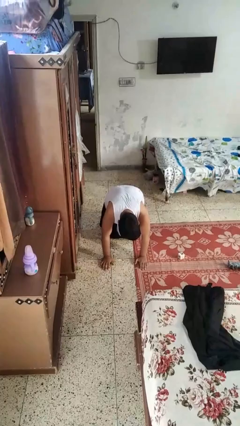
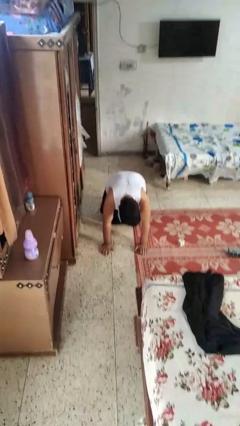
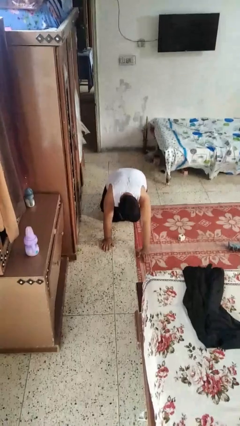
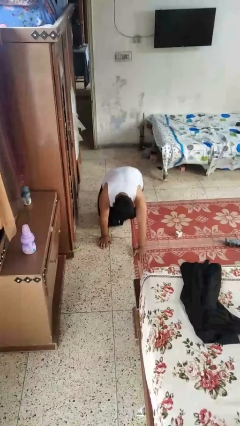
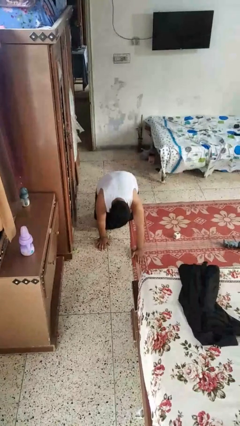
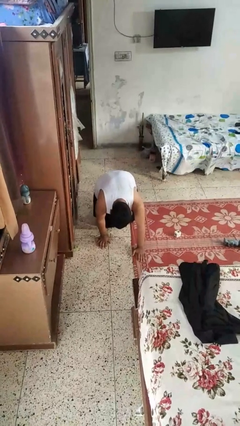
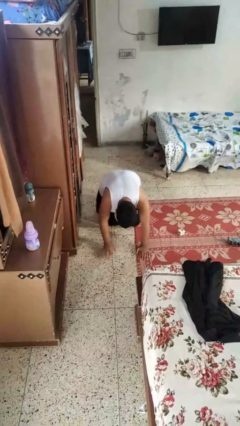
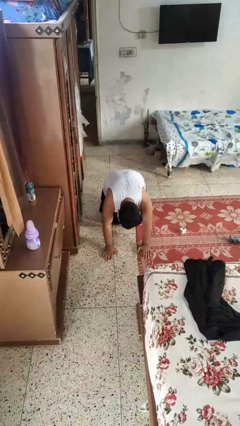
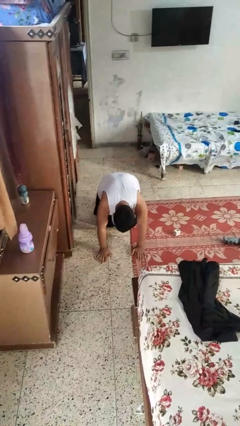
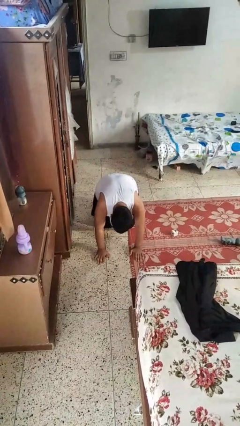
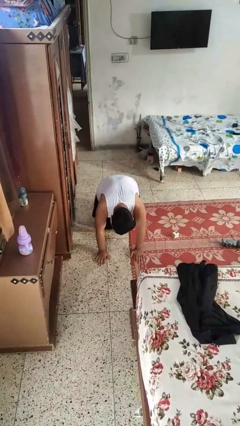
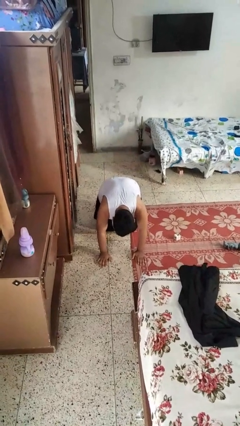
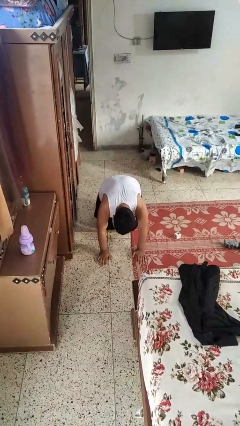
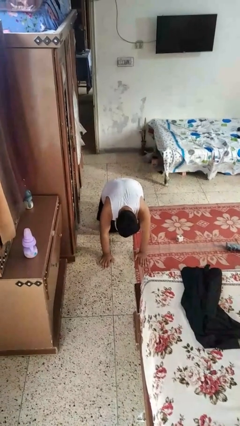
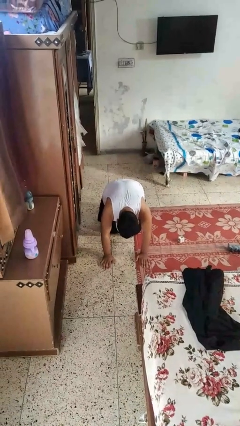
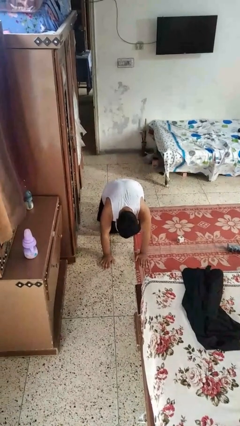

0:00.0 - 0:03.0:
person crawls

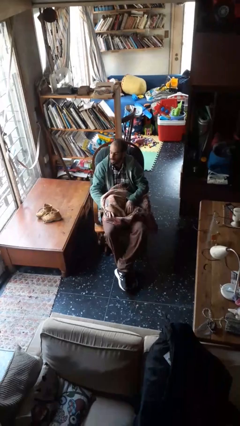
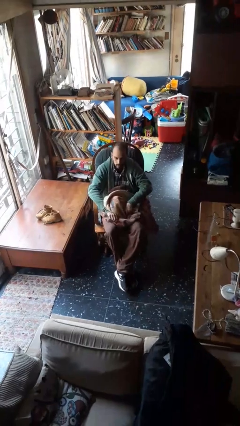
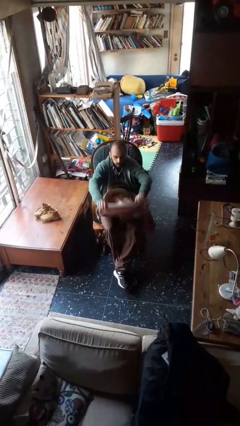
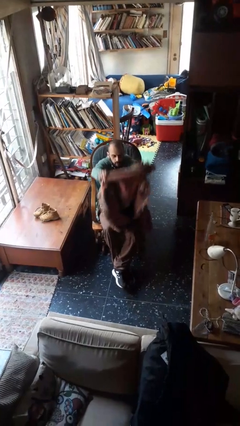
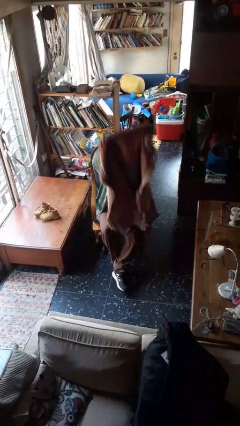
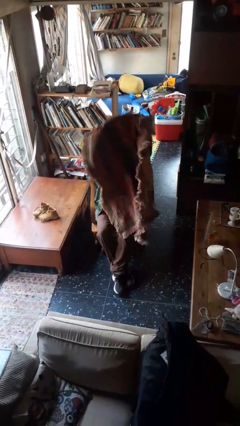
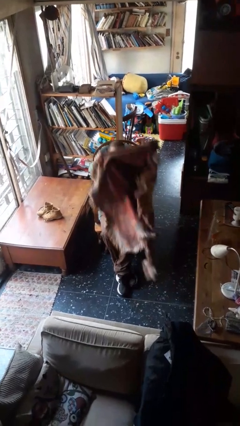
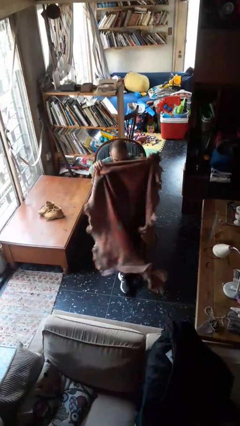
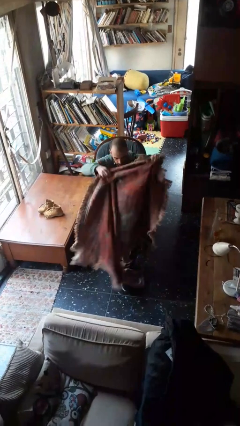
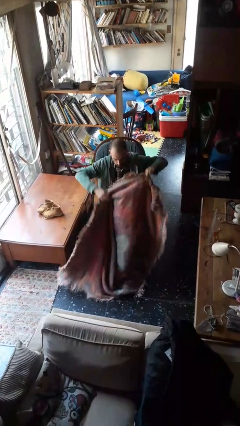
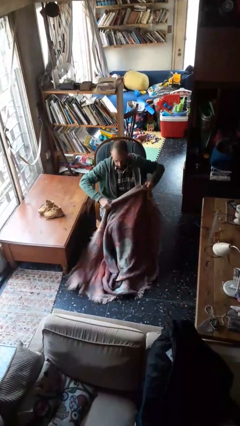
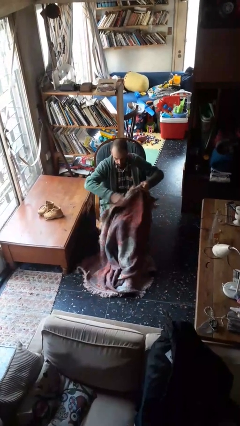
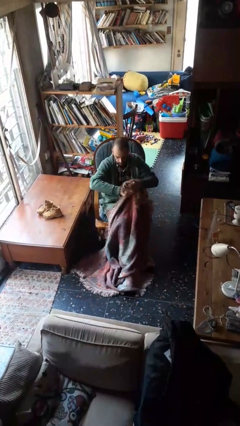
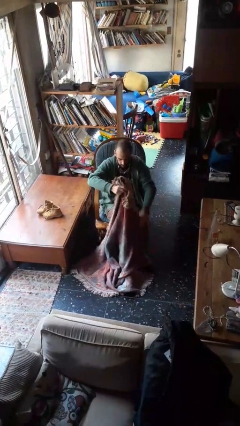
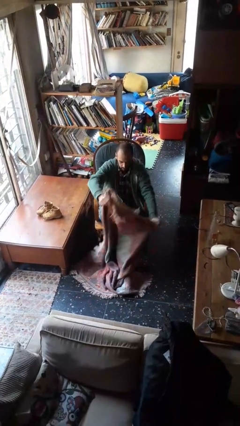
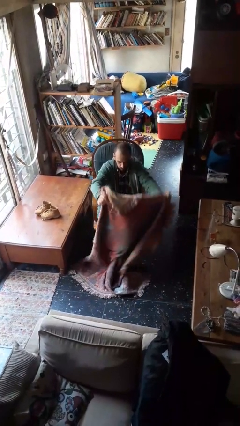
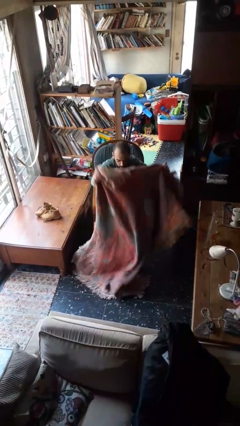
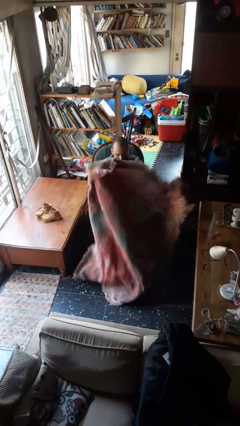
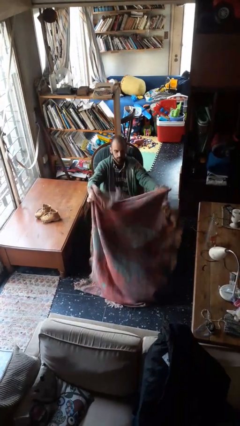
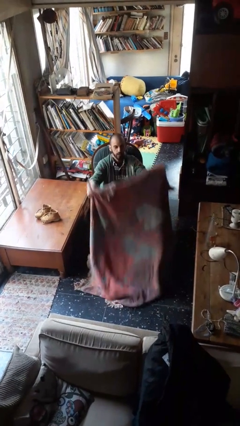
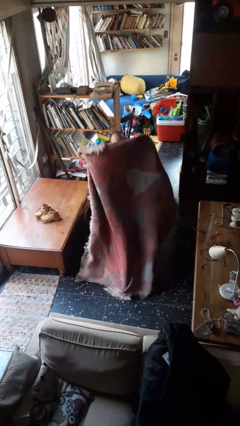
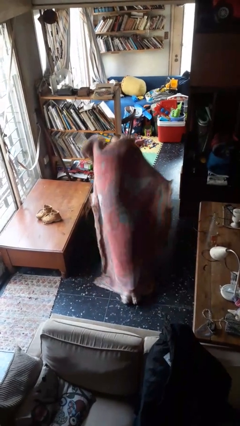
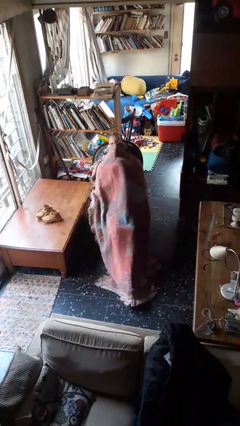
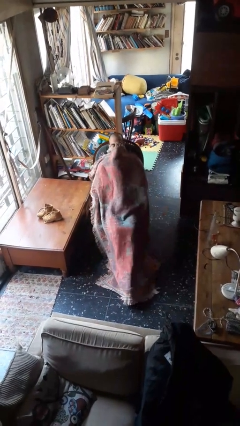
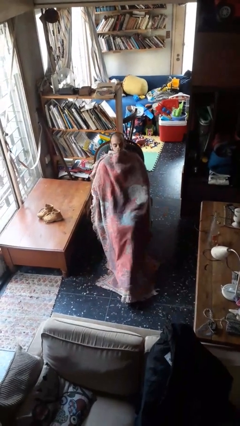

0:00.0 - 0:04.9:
person covers with blanket

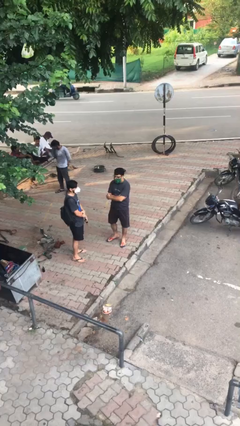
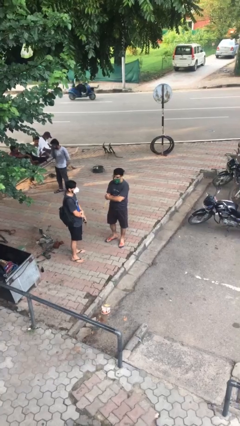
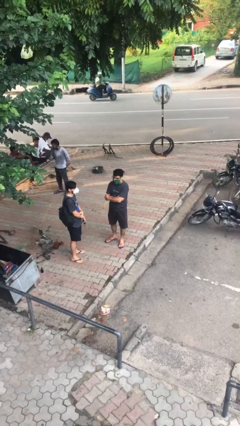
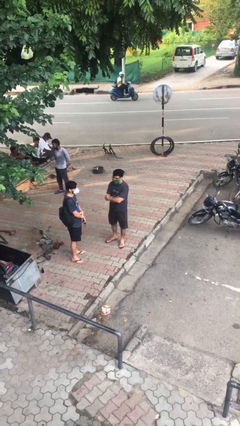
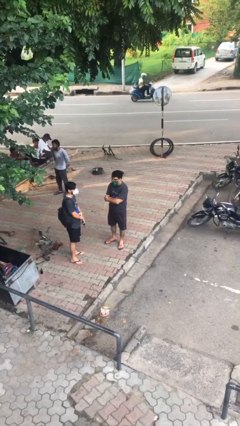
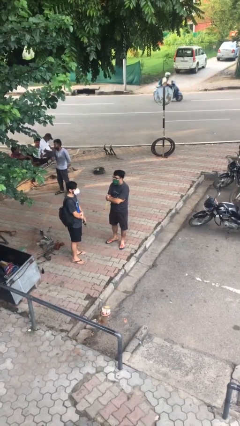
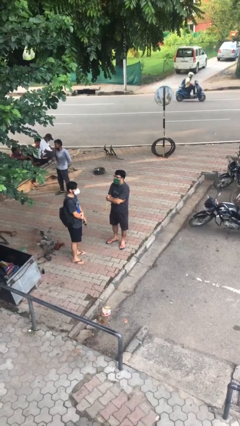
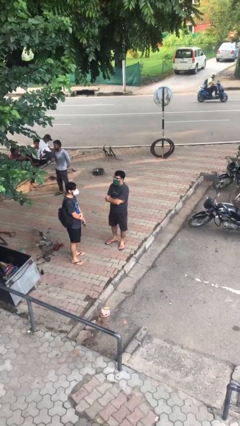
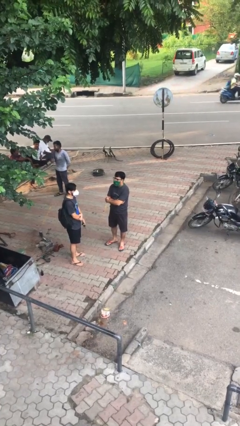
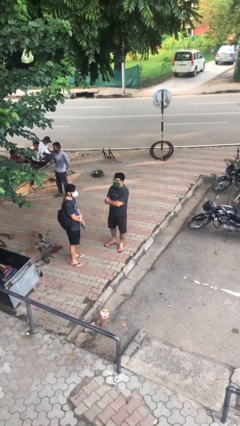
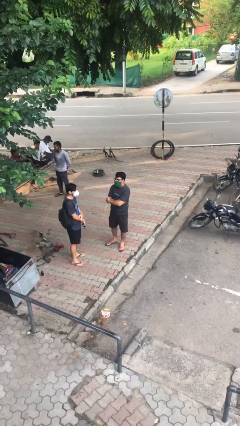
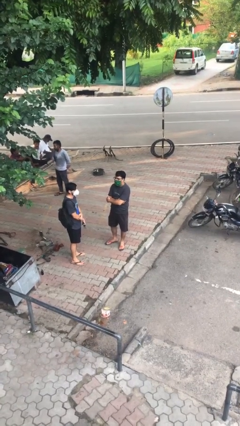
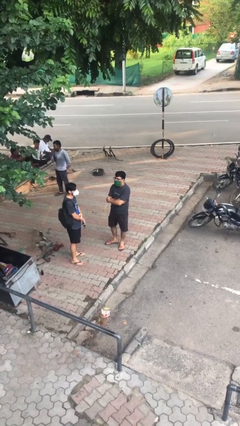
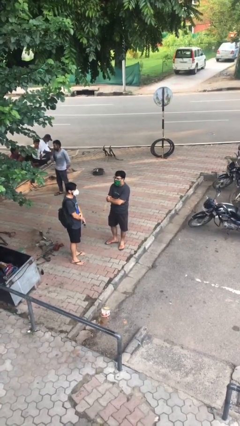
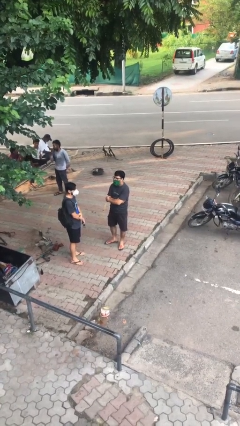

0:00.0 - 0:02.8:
person talks to person

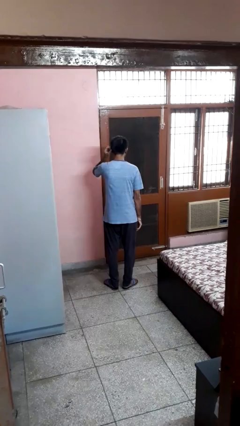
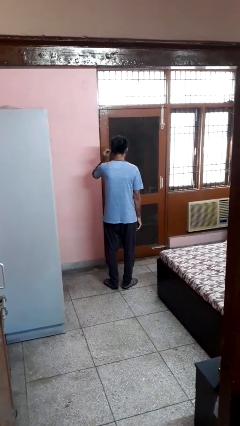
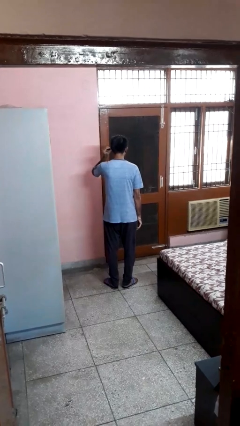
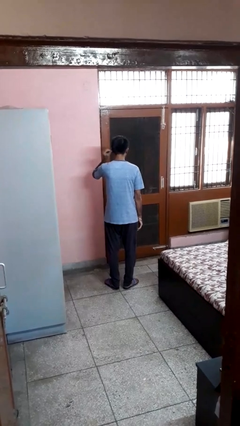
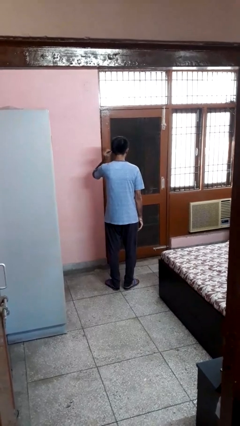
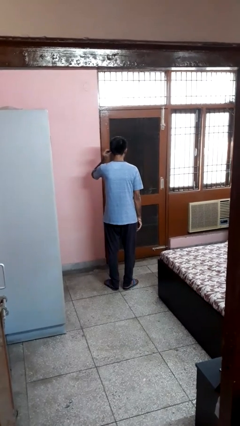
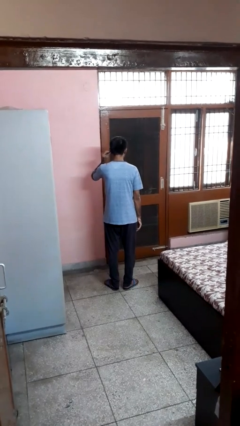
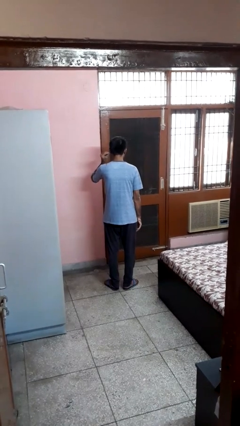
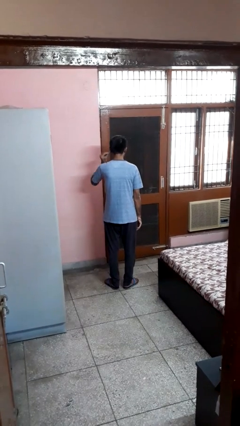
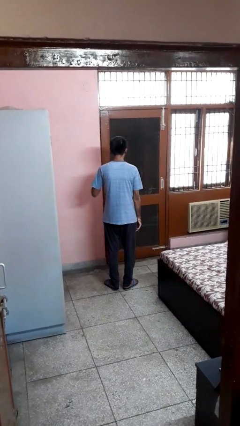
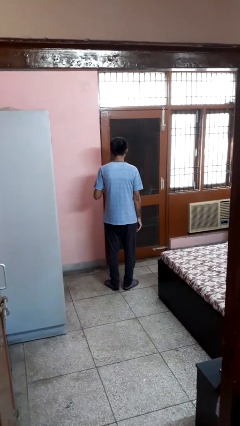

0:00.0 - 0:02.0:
person touches earlobe

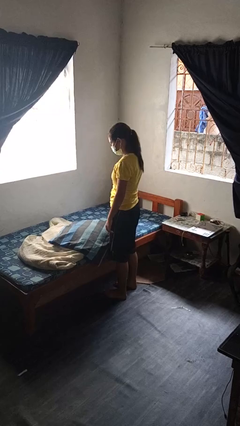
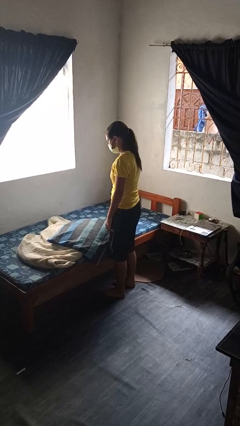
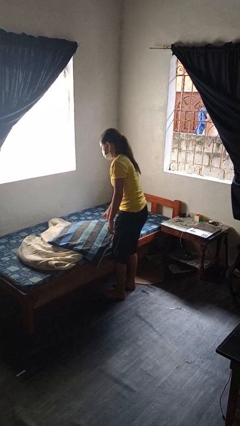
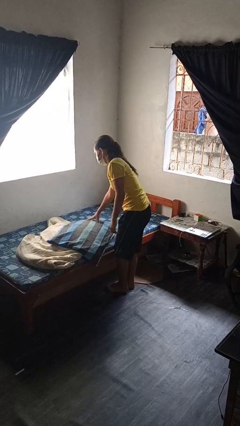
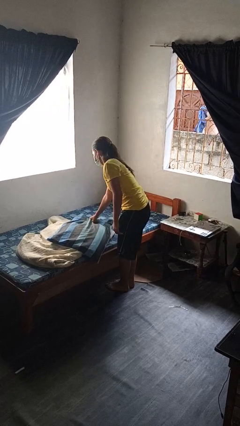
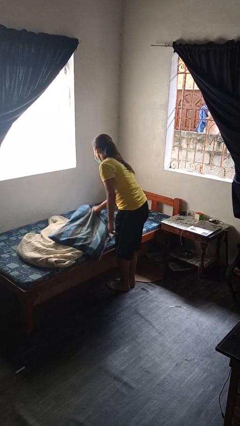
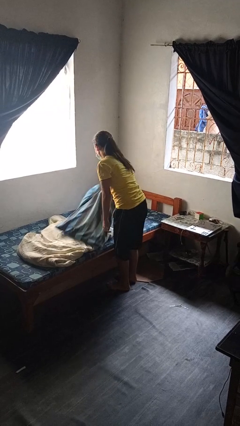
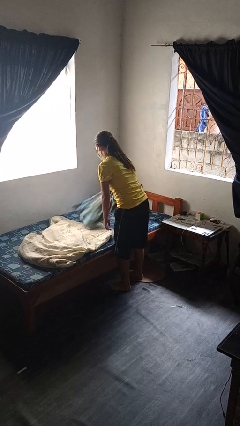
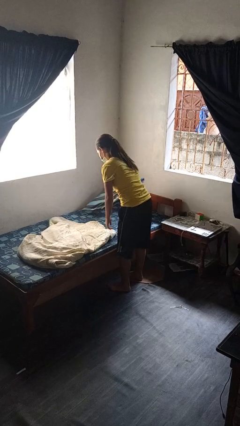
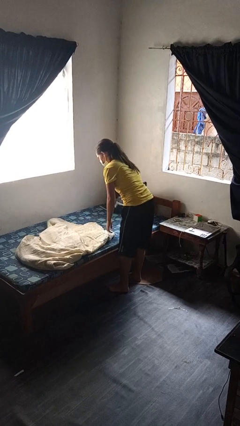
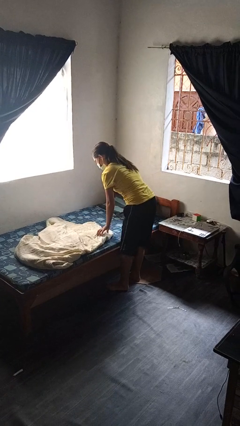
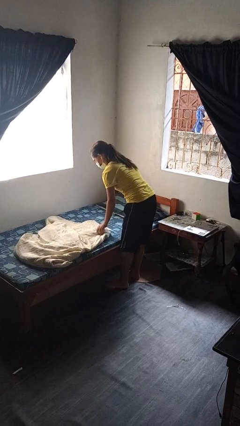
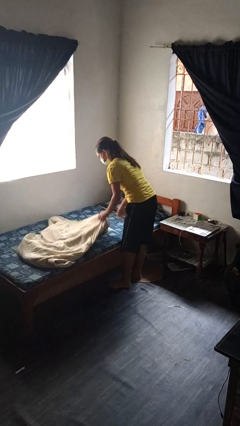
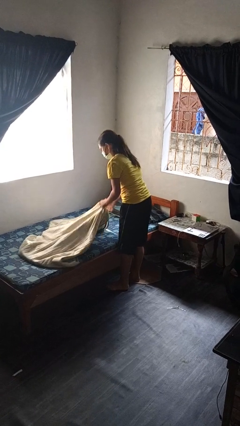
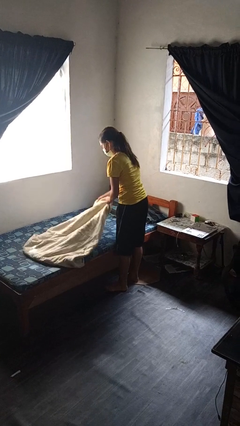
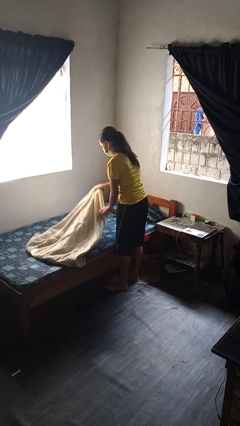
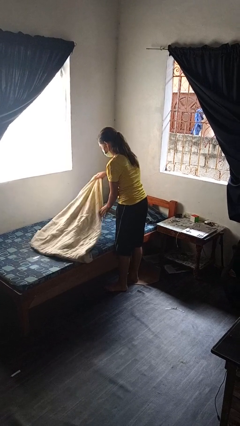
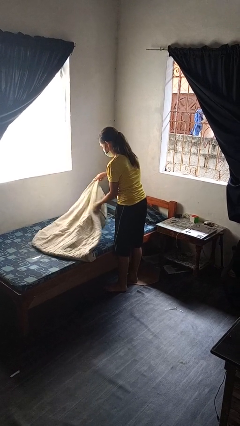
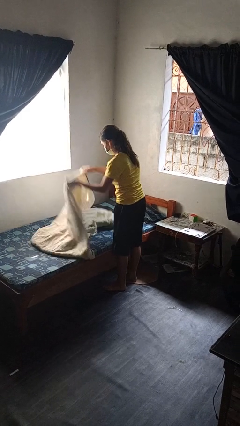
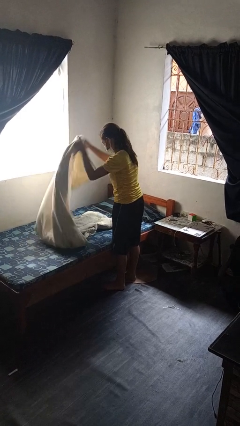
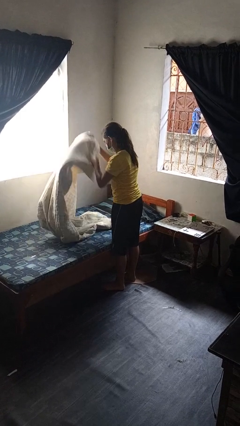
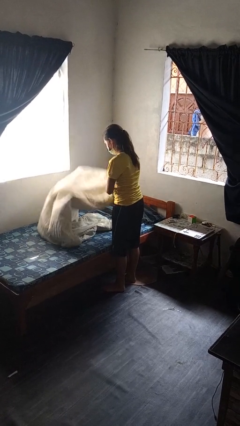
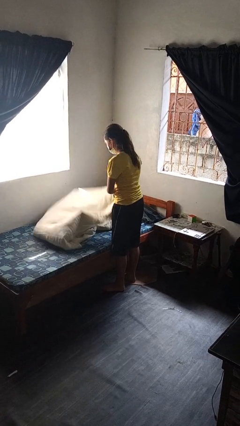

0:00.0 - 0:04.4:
person makes bed

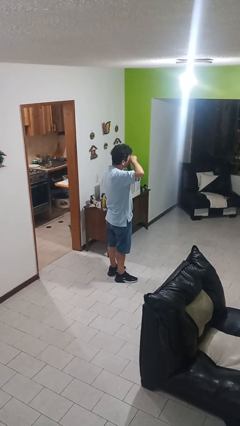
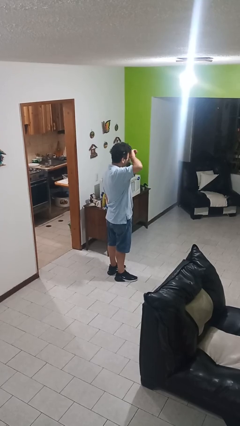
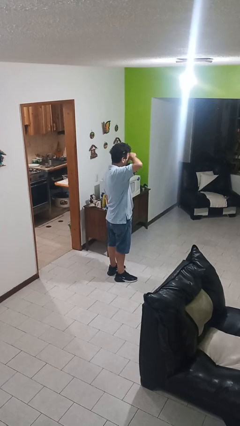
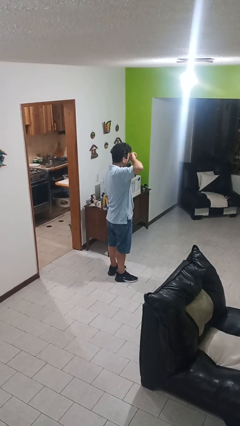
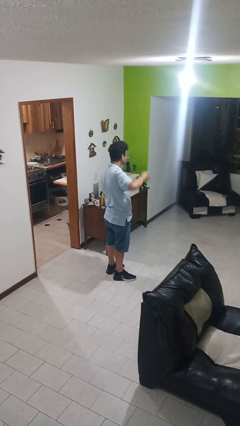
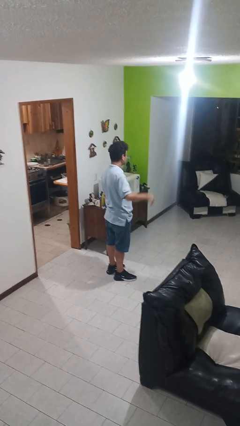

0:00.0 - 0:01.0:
person rubs eyes
